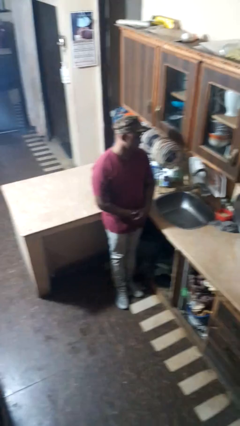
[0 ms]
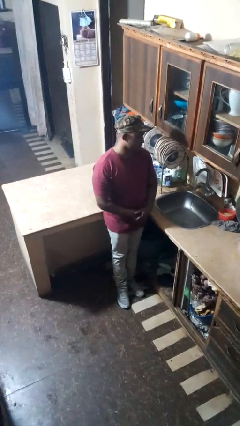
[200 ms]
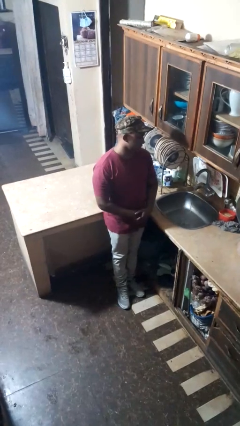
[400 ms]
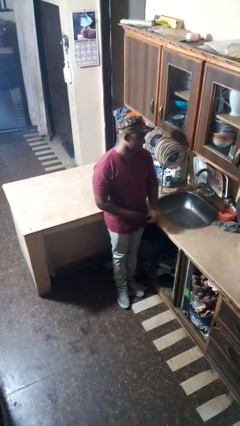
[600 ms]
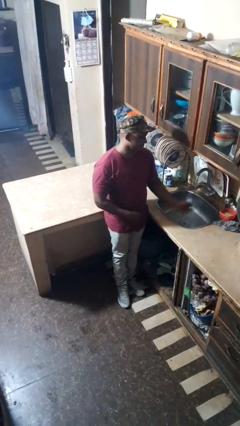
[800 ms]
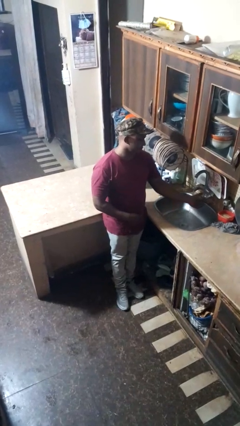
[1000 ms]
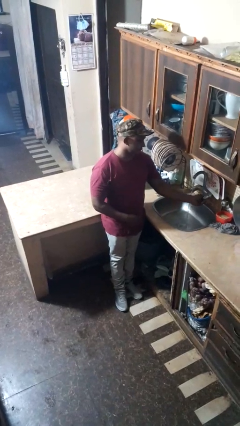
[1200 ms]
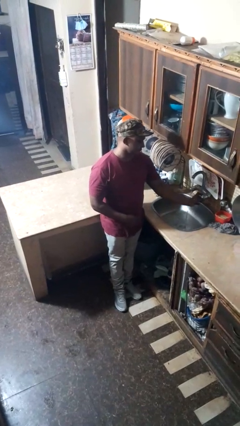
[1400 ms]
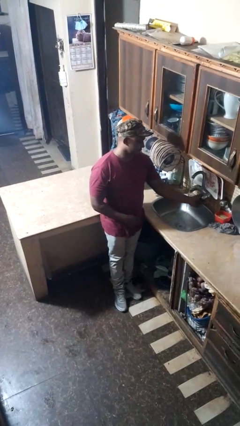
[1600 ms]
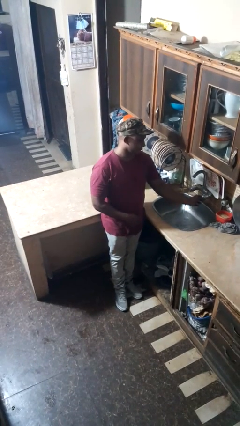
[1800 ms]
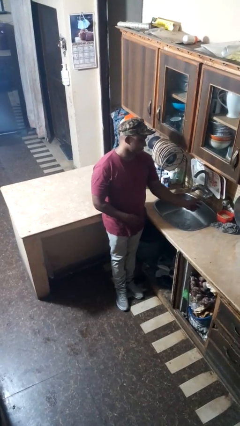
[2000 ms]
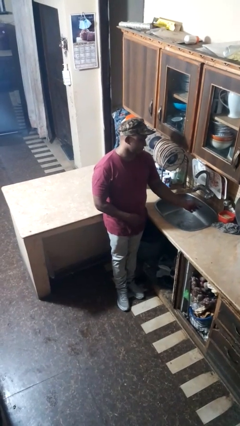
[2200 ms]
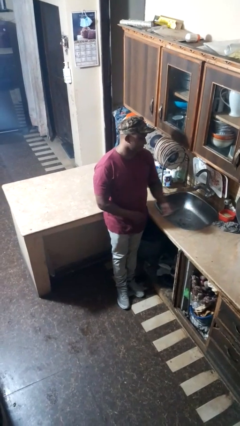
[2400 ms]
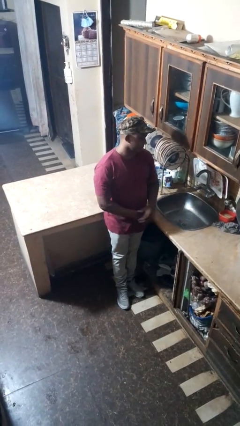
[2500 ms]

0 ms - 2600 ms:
person turns off faucet

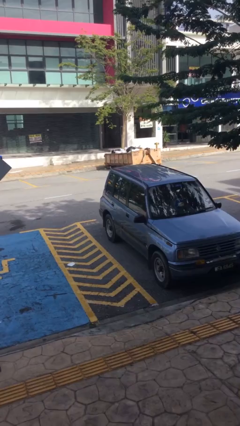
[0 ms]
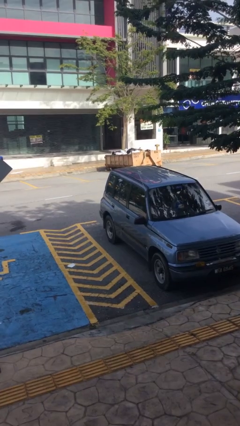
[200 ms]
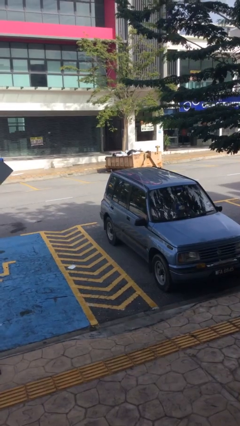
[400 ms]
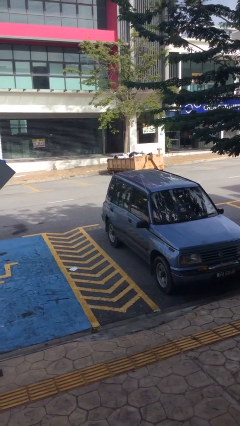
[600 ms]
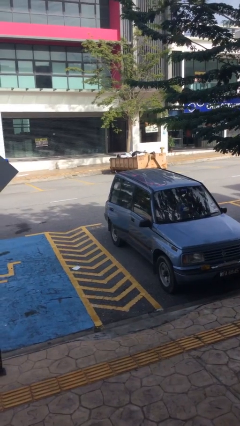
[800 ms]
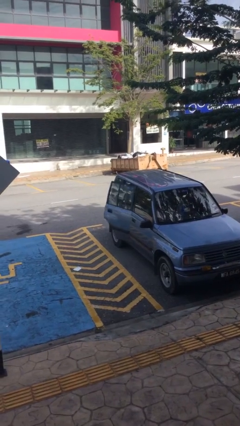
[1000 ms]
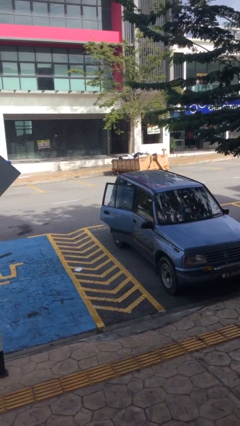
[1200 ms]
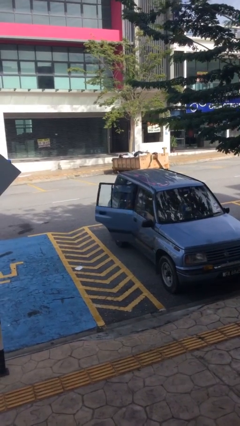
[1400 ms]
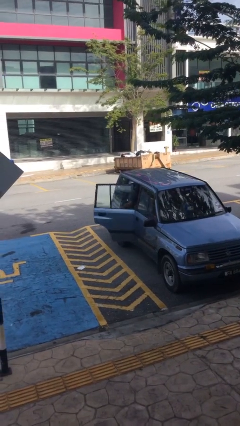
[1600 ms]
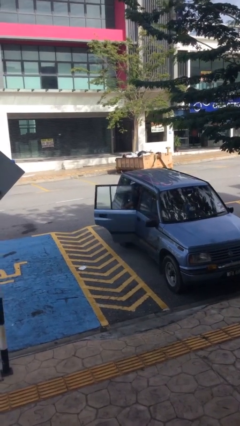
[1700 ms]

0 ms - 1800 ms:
person opens car door

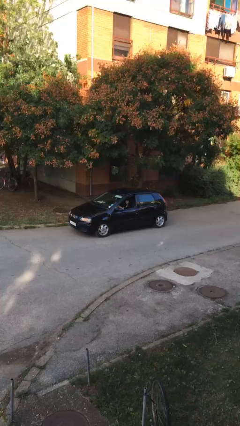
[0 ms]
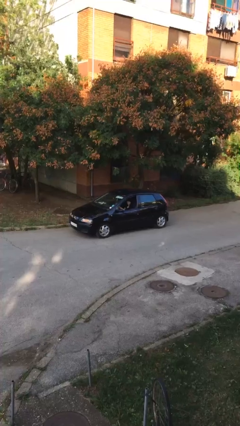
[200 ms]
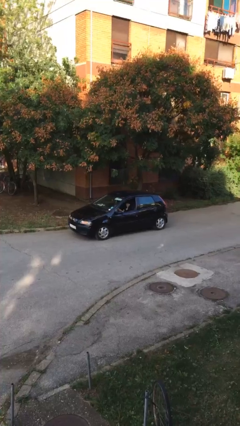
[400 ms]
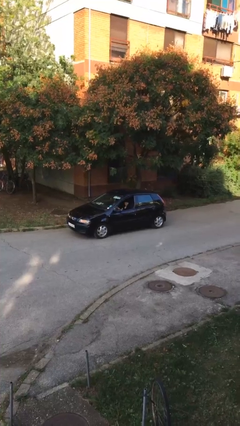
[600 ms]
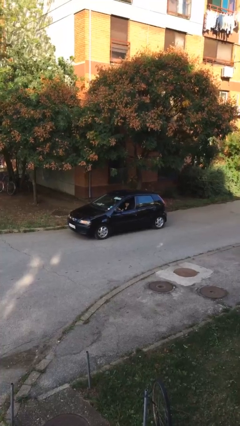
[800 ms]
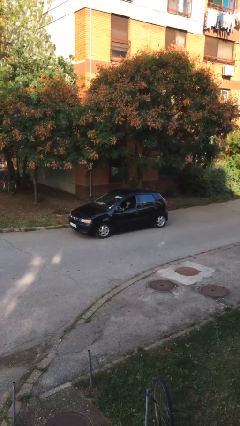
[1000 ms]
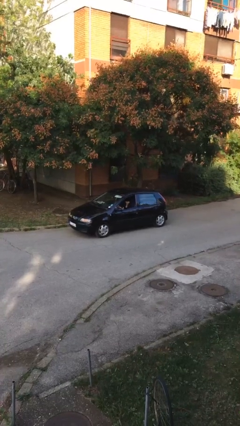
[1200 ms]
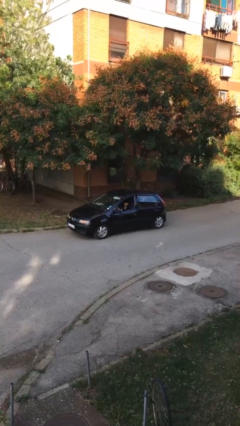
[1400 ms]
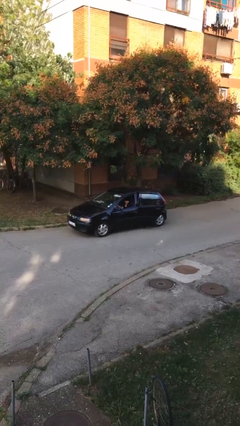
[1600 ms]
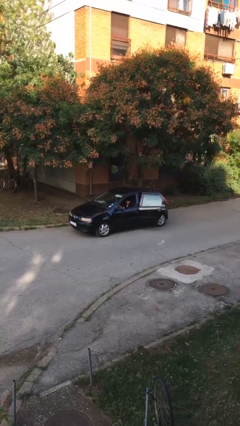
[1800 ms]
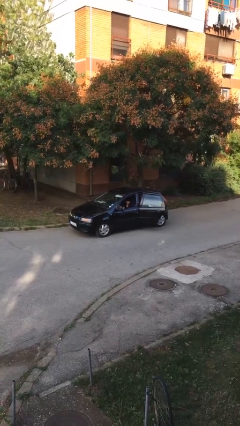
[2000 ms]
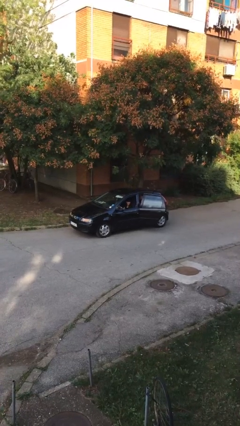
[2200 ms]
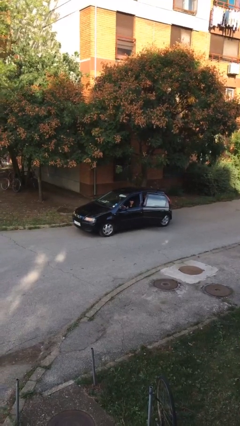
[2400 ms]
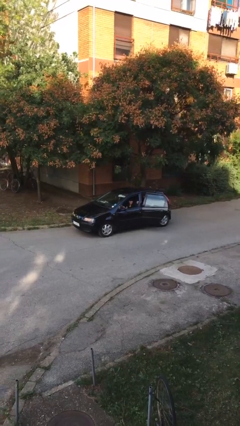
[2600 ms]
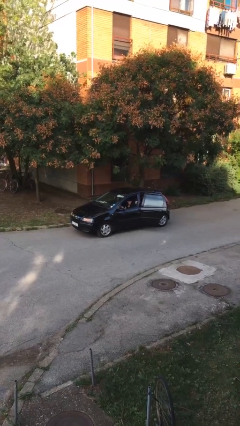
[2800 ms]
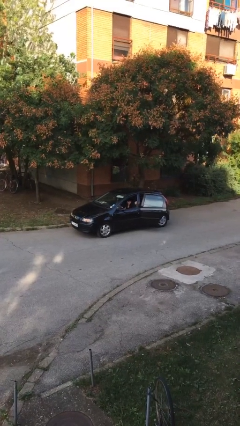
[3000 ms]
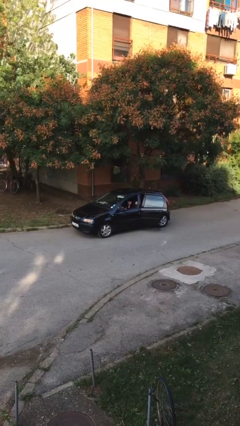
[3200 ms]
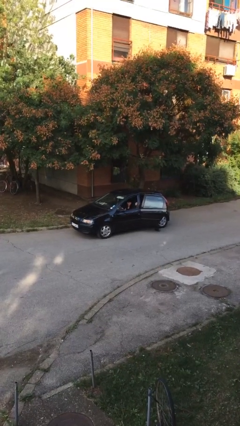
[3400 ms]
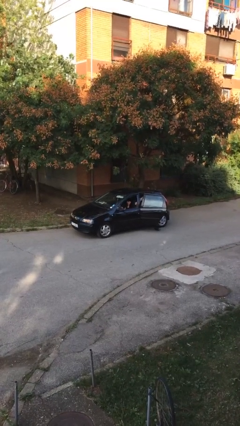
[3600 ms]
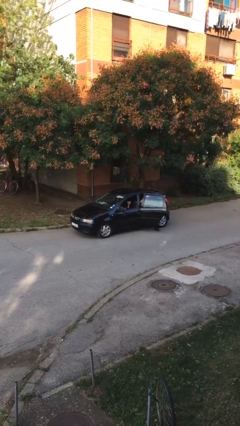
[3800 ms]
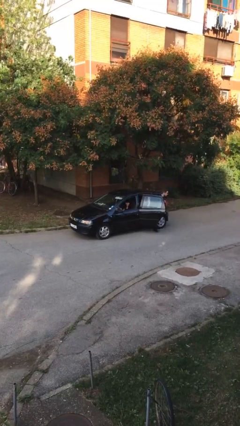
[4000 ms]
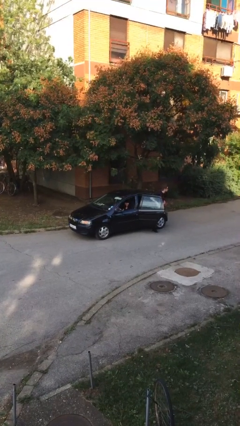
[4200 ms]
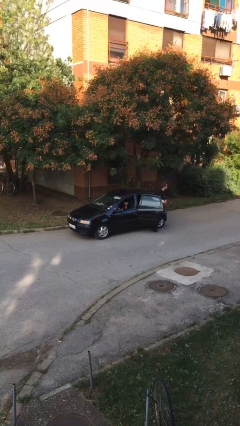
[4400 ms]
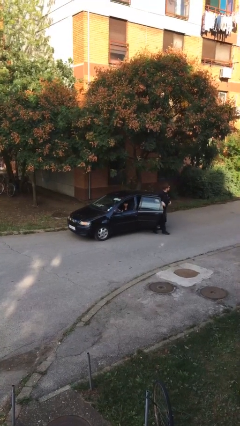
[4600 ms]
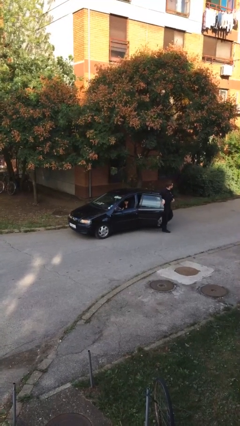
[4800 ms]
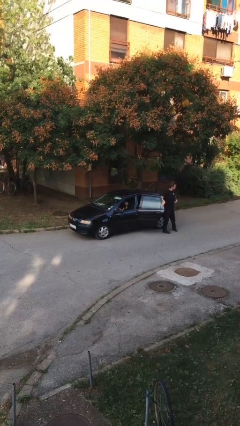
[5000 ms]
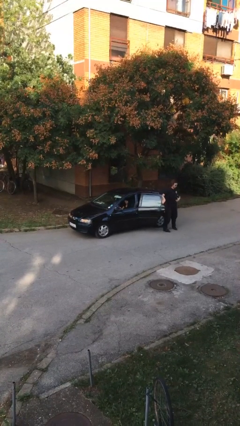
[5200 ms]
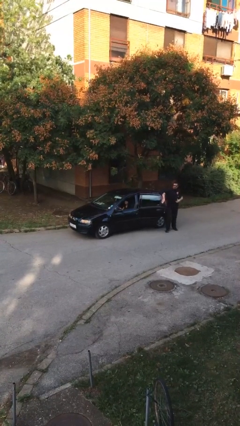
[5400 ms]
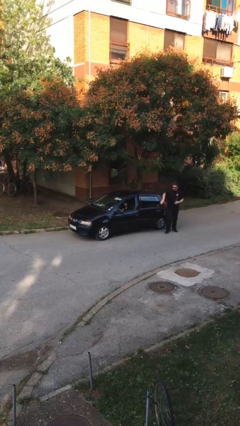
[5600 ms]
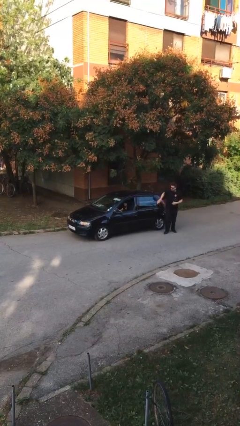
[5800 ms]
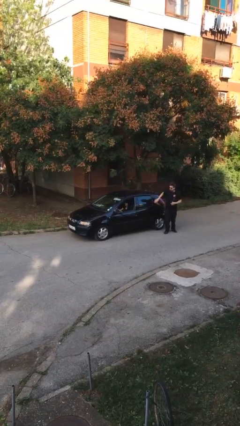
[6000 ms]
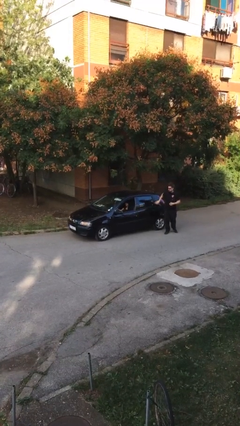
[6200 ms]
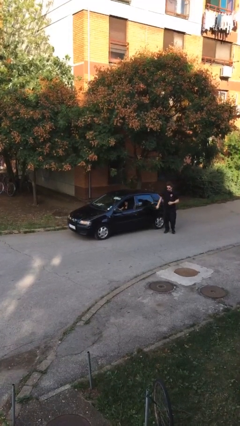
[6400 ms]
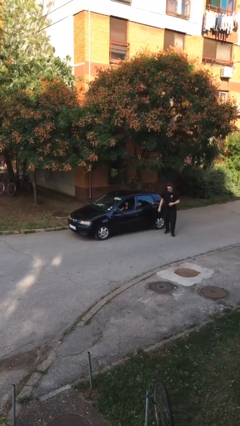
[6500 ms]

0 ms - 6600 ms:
car drops off person

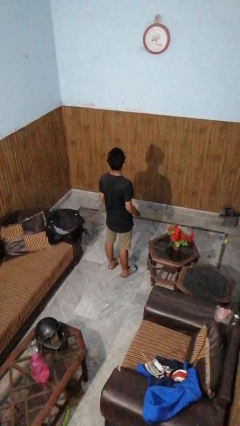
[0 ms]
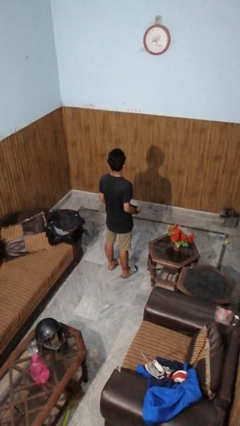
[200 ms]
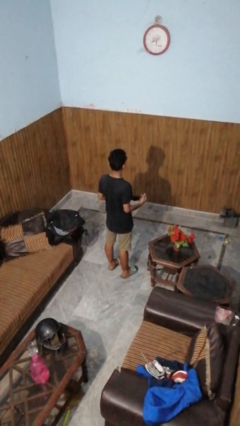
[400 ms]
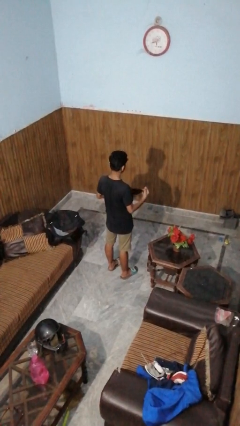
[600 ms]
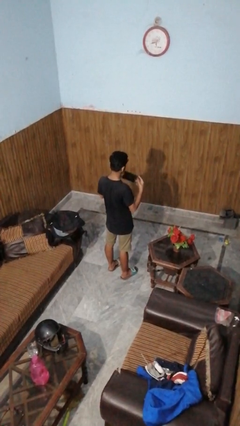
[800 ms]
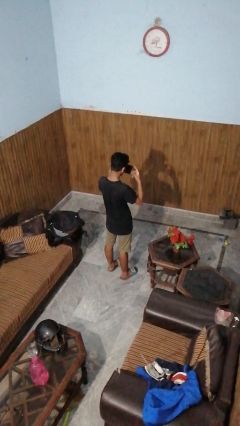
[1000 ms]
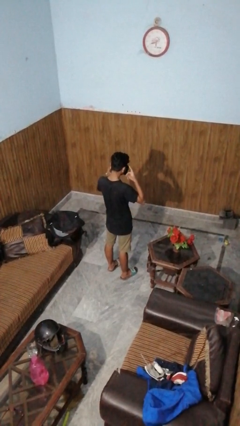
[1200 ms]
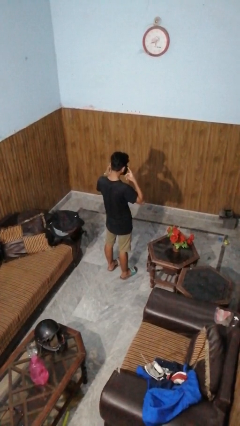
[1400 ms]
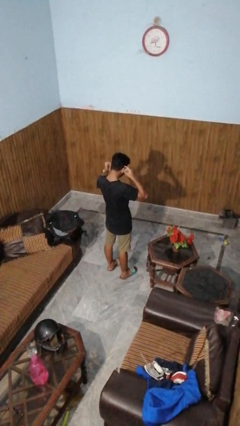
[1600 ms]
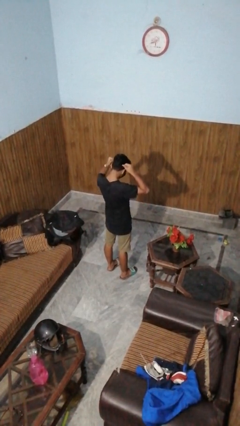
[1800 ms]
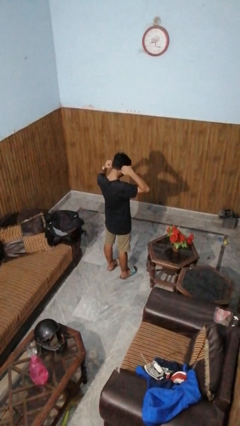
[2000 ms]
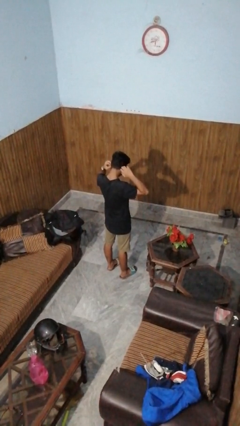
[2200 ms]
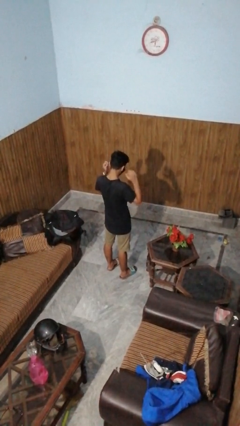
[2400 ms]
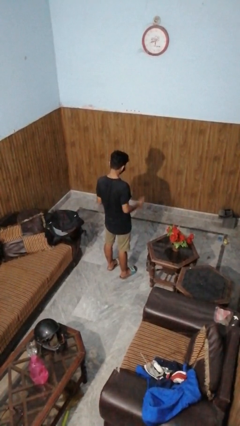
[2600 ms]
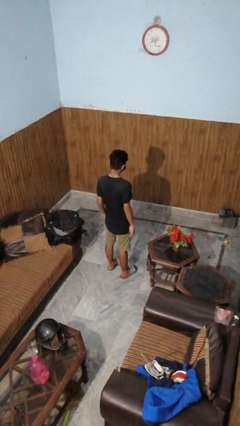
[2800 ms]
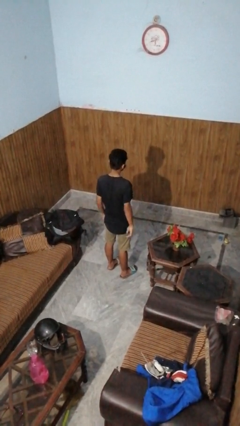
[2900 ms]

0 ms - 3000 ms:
person puts on facemask

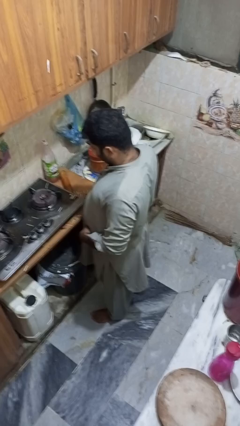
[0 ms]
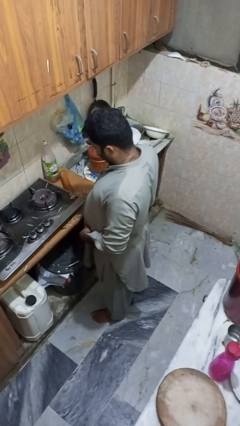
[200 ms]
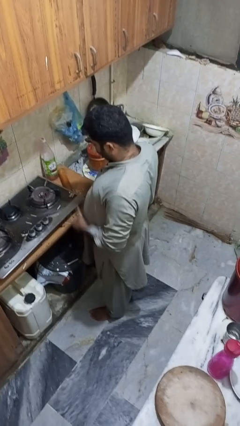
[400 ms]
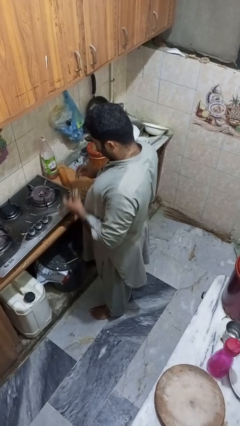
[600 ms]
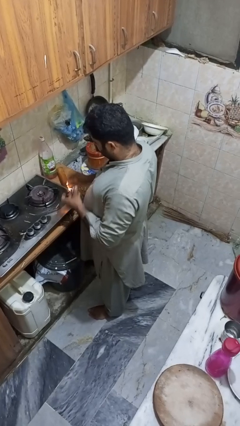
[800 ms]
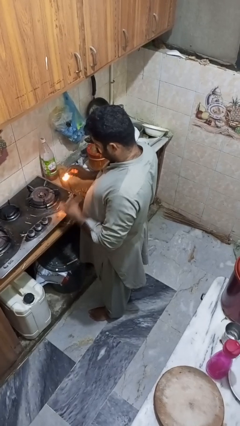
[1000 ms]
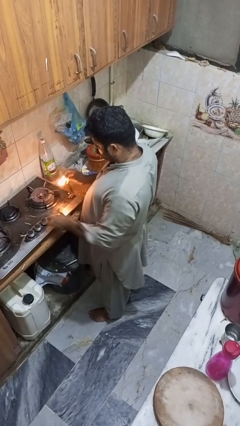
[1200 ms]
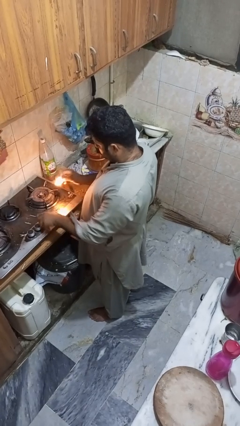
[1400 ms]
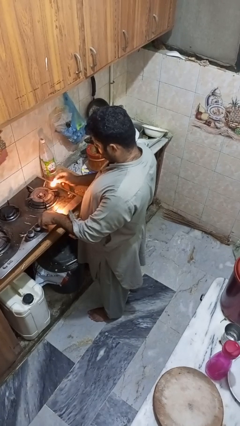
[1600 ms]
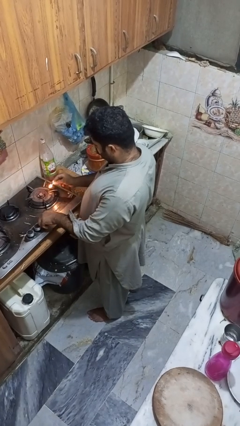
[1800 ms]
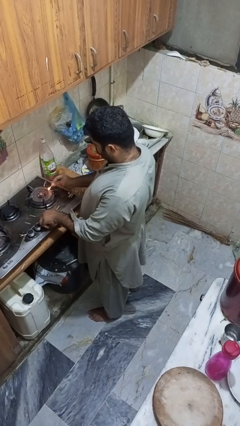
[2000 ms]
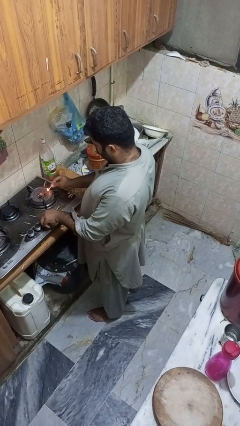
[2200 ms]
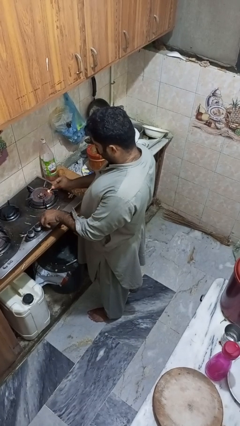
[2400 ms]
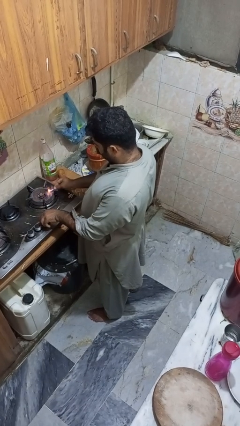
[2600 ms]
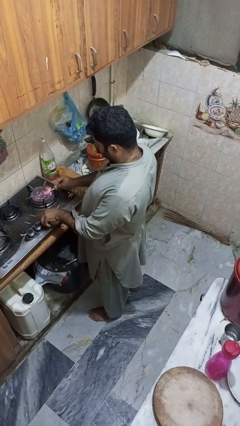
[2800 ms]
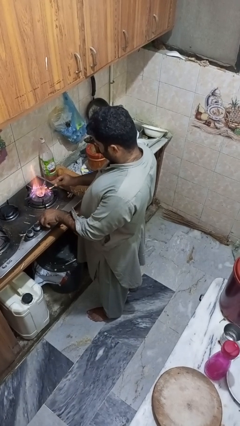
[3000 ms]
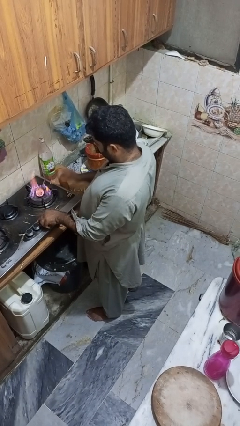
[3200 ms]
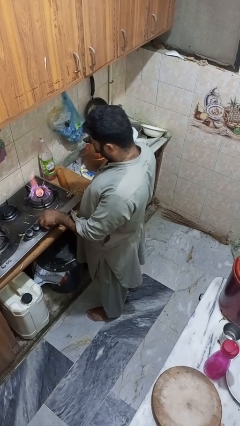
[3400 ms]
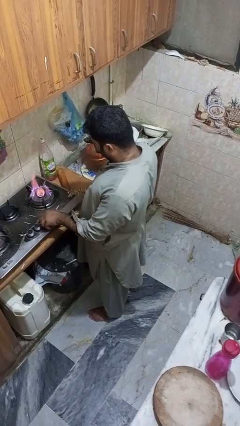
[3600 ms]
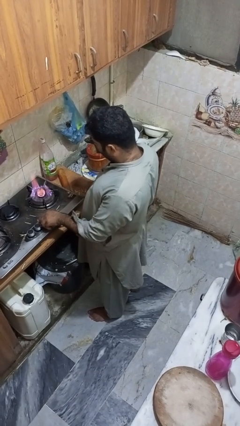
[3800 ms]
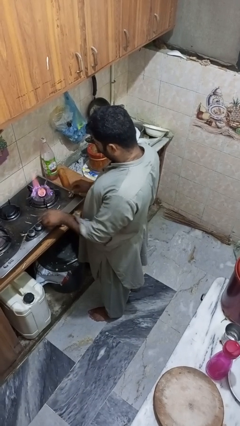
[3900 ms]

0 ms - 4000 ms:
person turns on stovetop

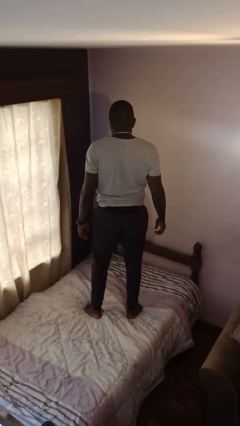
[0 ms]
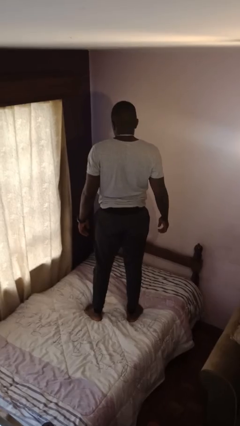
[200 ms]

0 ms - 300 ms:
person jumps on bed
